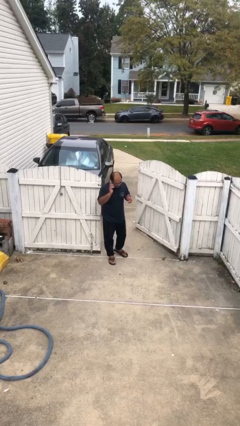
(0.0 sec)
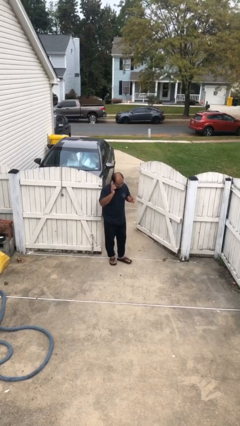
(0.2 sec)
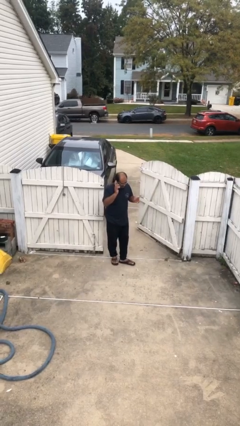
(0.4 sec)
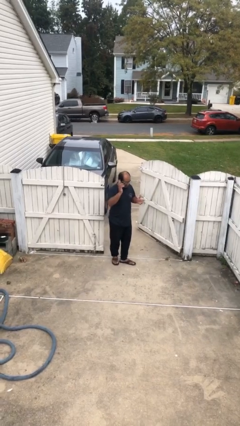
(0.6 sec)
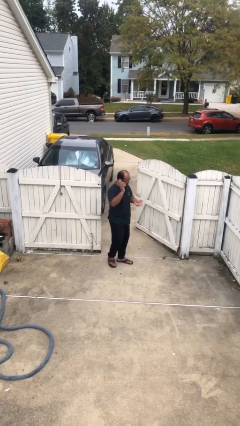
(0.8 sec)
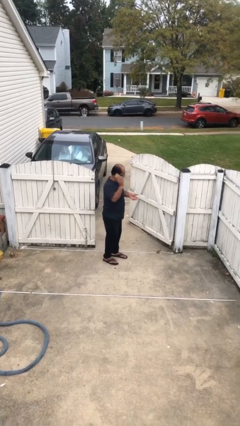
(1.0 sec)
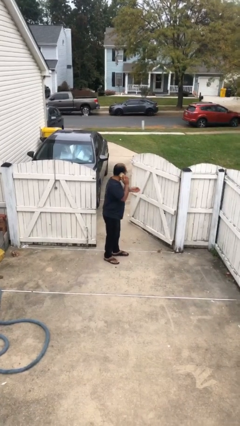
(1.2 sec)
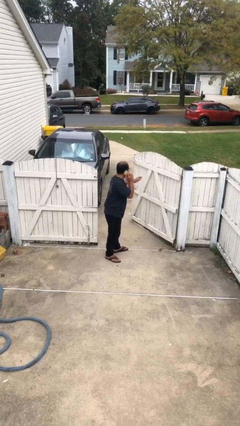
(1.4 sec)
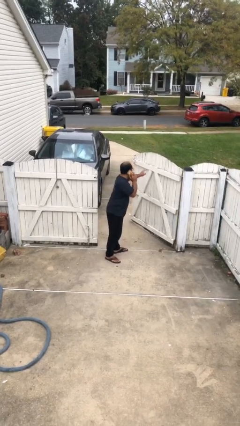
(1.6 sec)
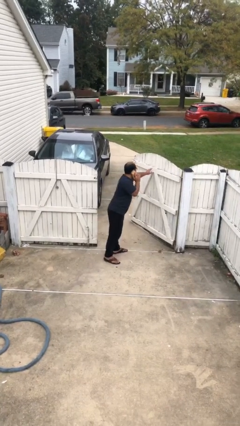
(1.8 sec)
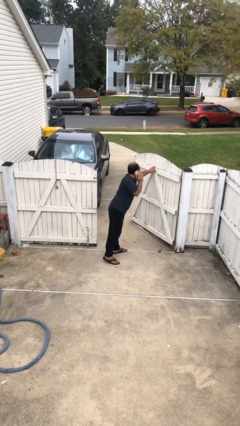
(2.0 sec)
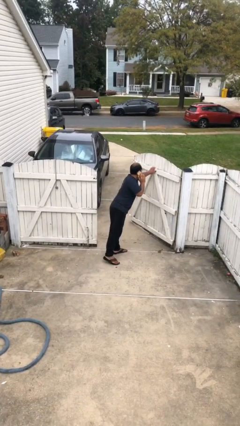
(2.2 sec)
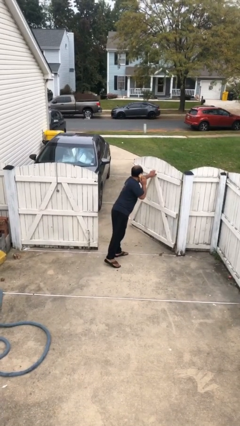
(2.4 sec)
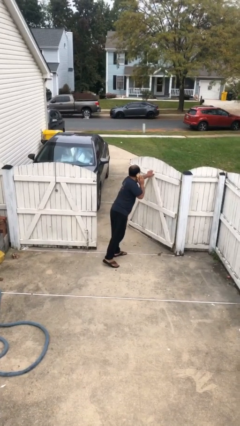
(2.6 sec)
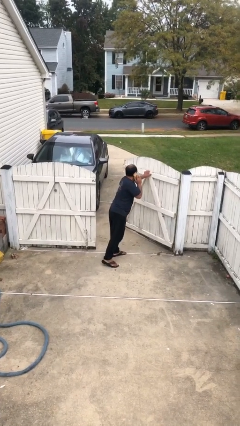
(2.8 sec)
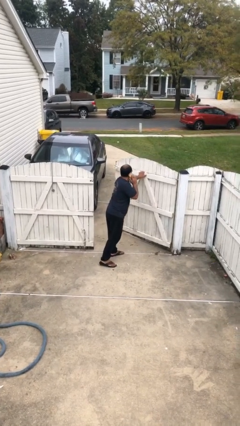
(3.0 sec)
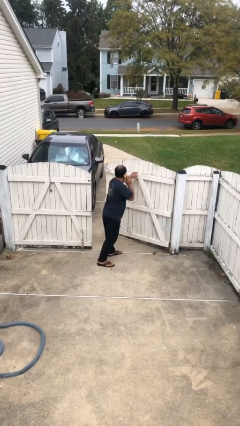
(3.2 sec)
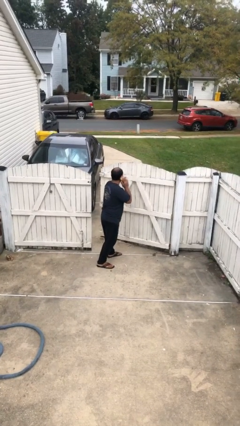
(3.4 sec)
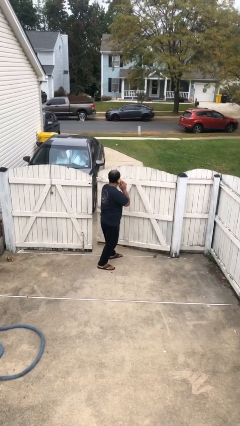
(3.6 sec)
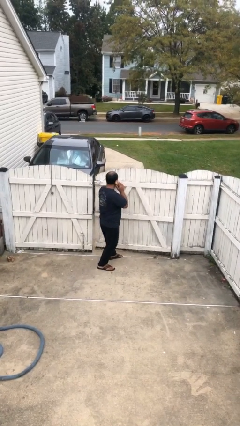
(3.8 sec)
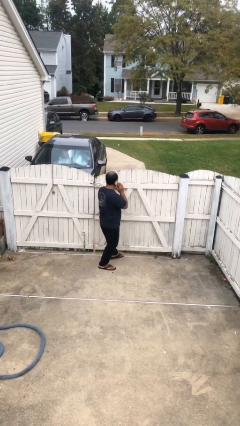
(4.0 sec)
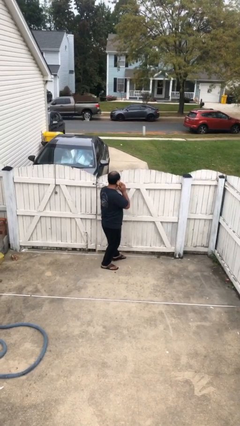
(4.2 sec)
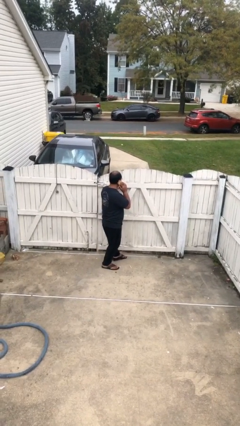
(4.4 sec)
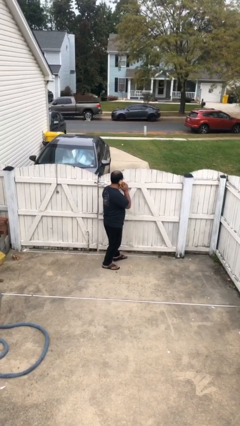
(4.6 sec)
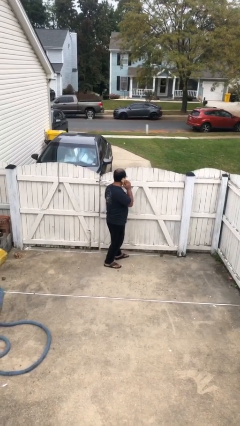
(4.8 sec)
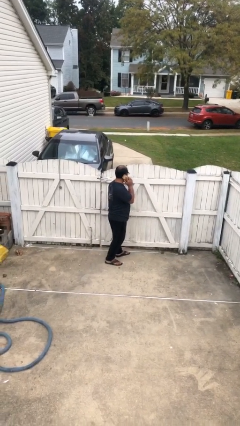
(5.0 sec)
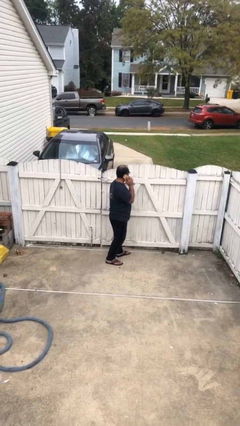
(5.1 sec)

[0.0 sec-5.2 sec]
person closes facility door

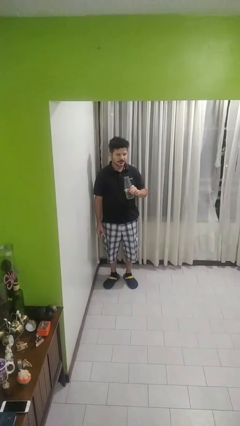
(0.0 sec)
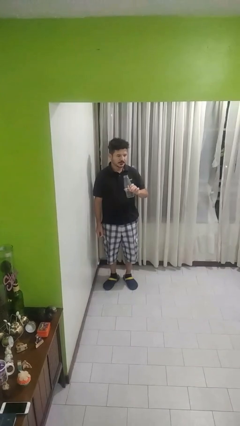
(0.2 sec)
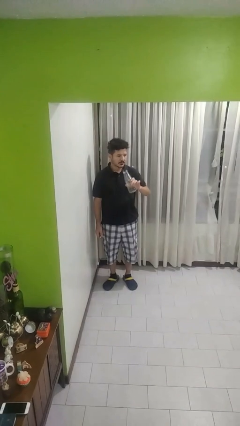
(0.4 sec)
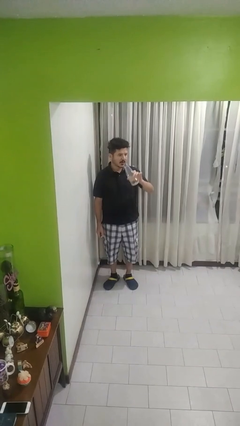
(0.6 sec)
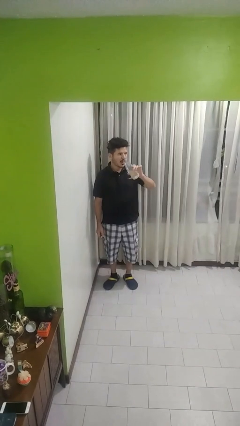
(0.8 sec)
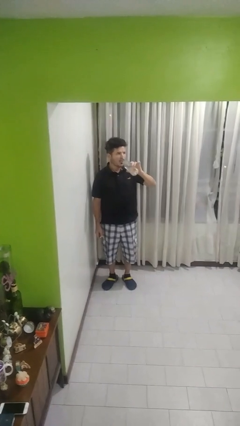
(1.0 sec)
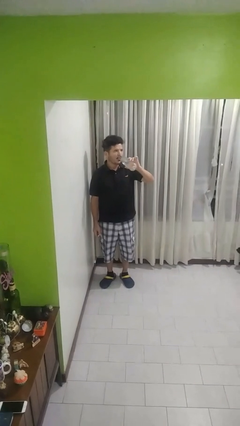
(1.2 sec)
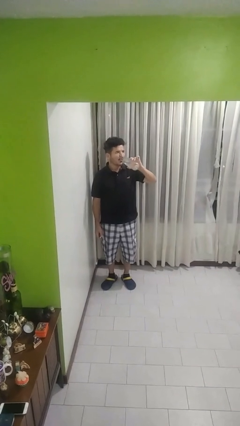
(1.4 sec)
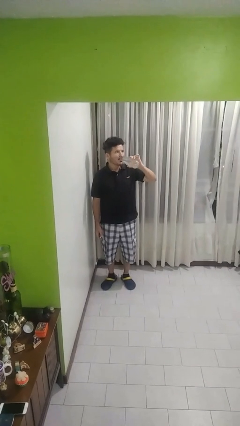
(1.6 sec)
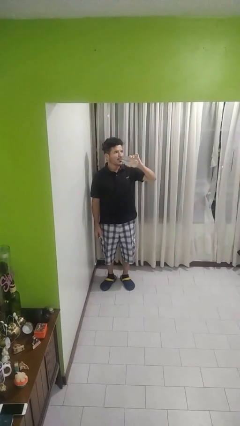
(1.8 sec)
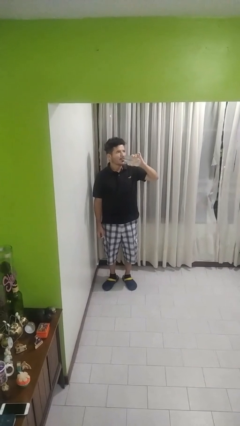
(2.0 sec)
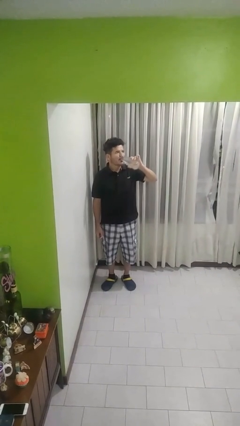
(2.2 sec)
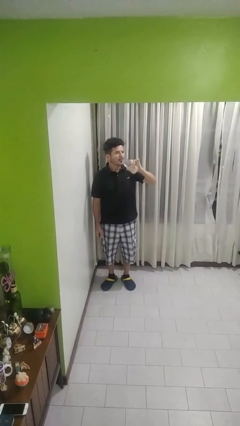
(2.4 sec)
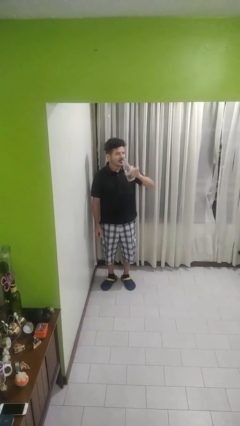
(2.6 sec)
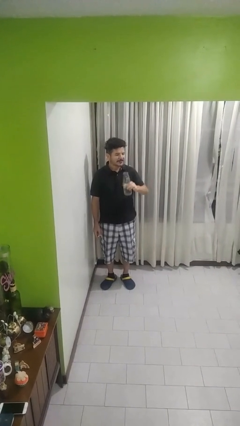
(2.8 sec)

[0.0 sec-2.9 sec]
person drinks from bottle

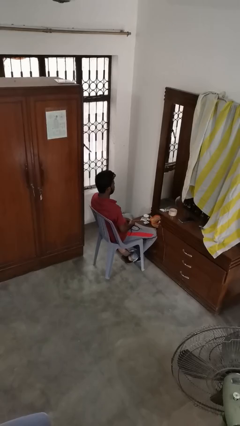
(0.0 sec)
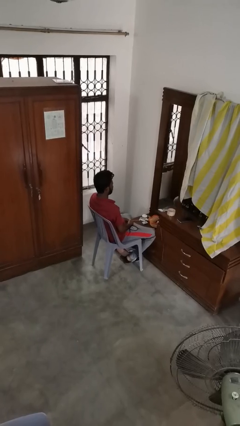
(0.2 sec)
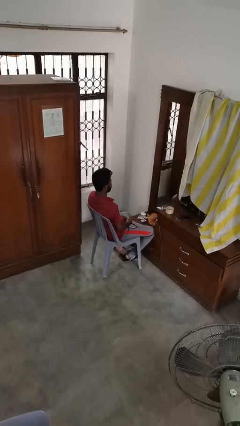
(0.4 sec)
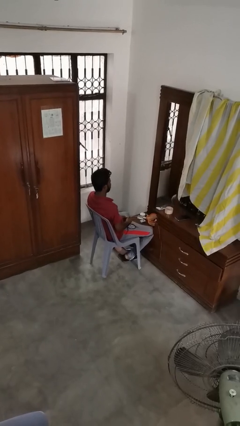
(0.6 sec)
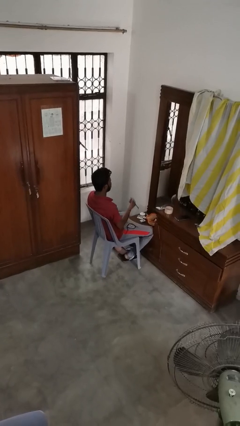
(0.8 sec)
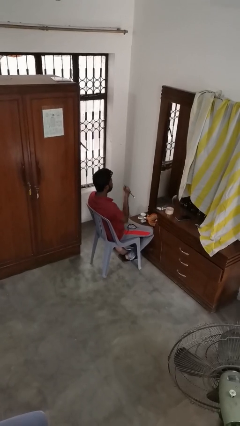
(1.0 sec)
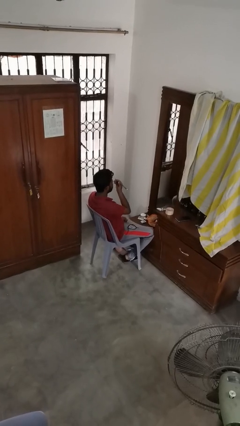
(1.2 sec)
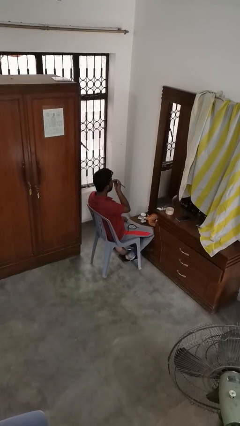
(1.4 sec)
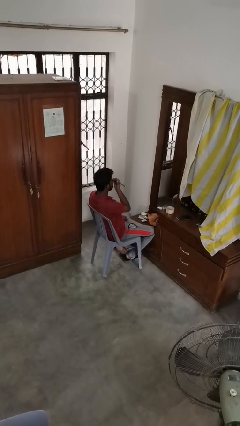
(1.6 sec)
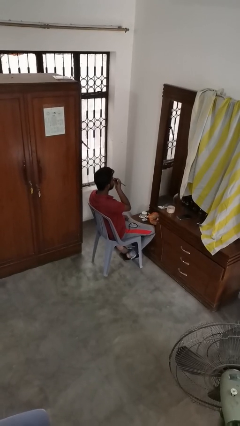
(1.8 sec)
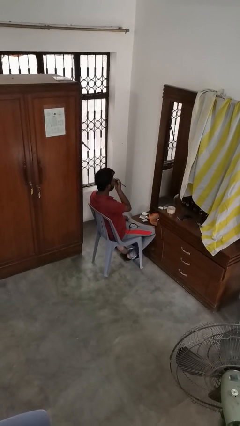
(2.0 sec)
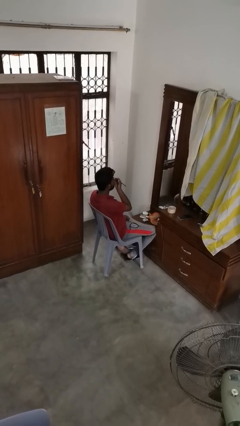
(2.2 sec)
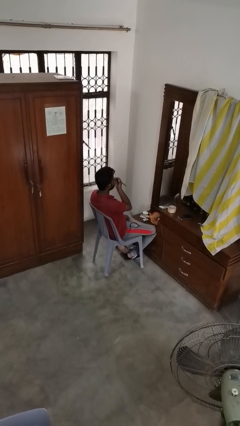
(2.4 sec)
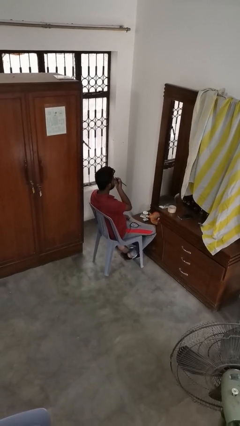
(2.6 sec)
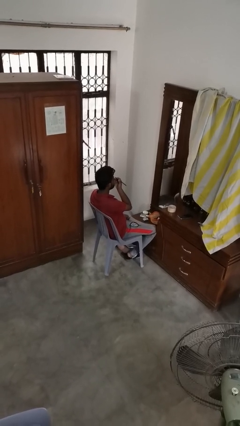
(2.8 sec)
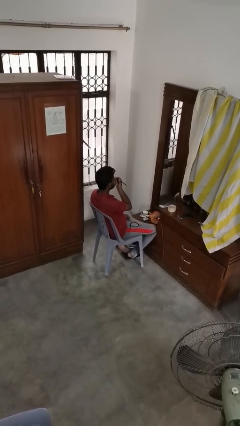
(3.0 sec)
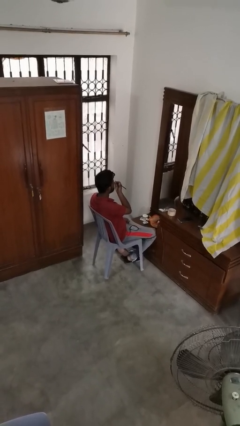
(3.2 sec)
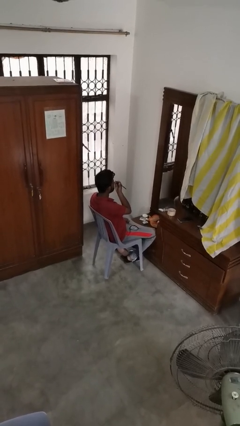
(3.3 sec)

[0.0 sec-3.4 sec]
person applies eye makeup

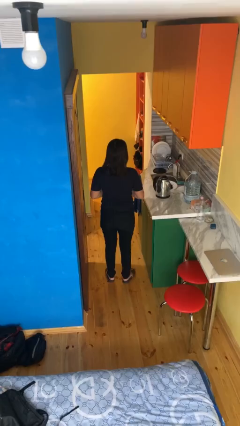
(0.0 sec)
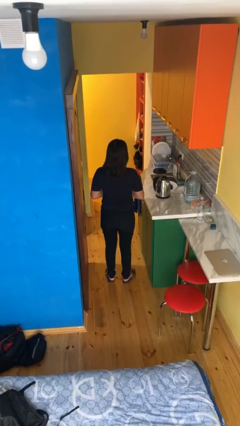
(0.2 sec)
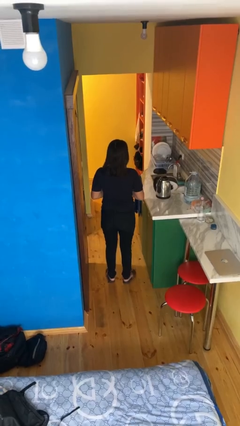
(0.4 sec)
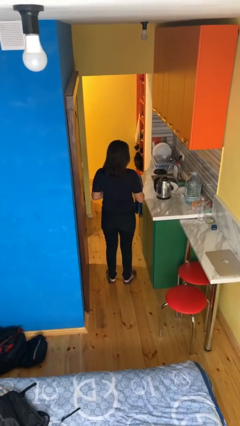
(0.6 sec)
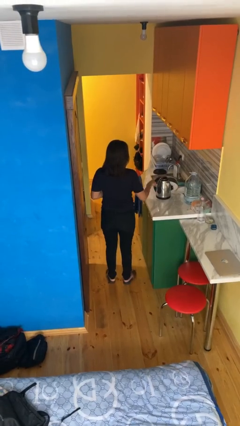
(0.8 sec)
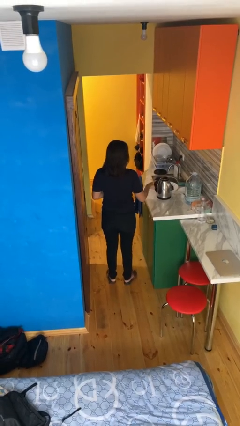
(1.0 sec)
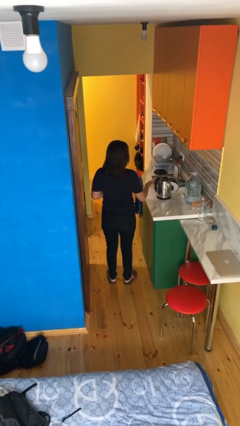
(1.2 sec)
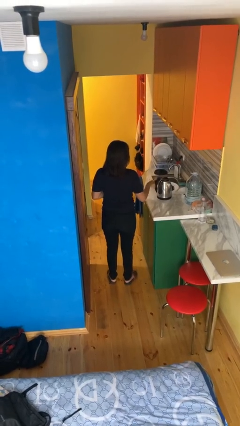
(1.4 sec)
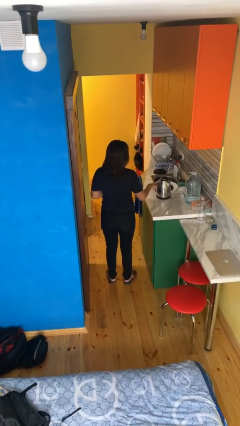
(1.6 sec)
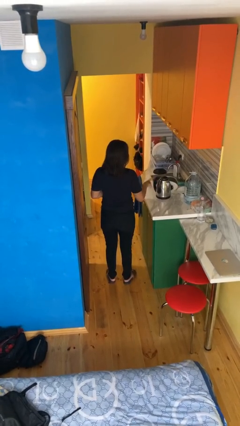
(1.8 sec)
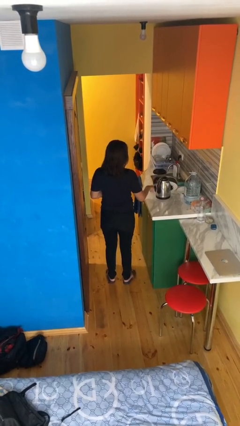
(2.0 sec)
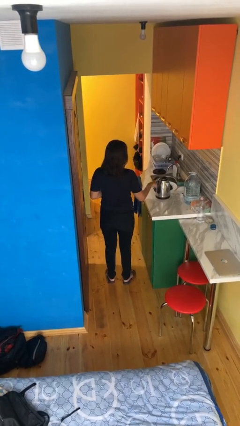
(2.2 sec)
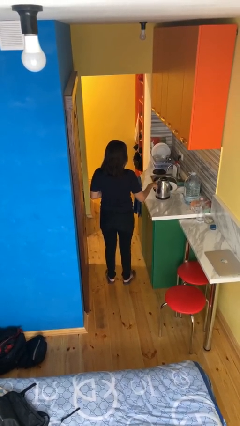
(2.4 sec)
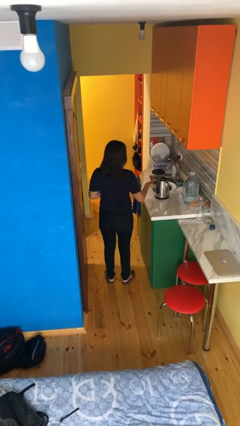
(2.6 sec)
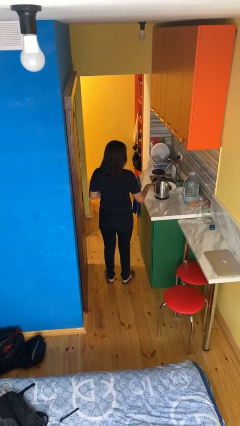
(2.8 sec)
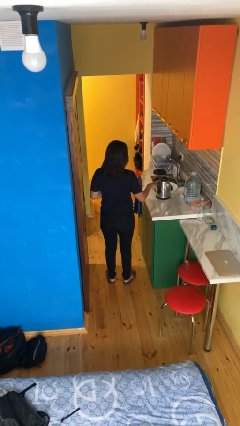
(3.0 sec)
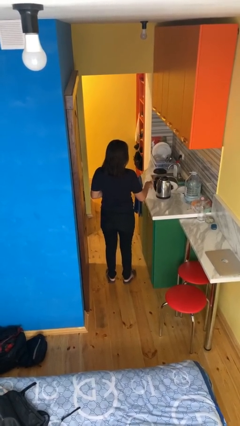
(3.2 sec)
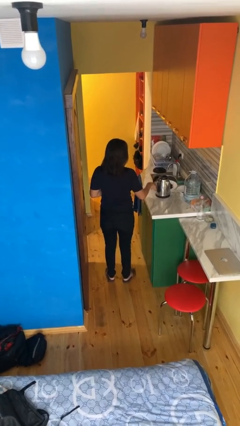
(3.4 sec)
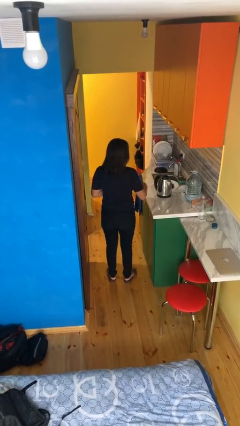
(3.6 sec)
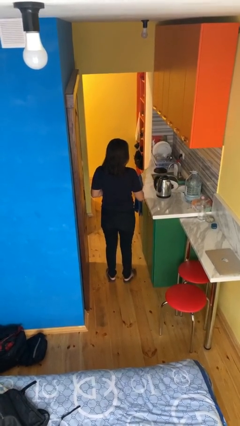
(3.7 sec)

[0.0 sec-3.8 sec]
person taps object with finger

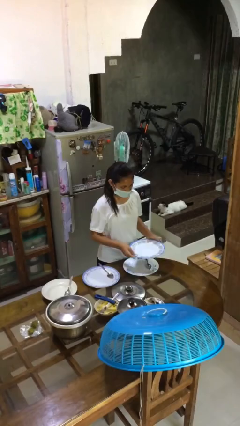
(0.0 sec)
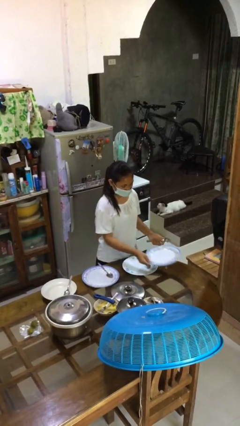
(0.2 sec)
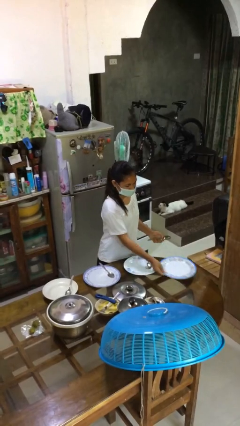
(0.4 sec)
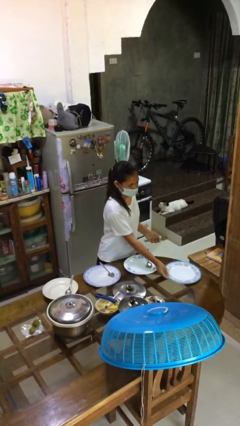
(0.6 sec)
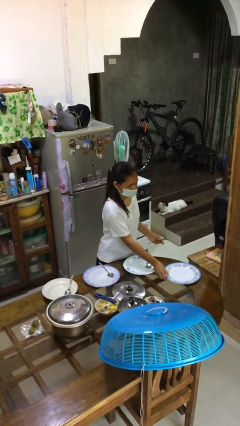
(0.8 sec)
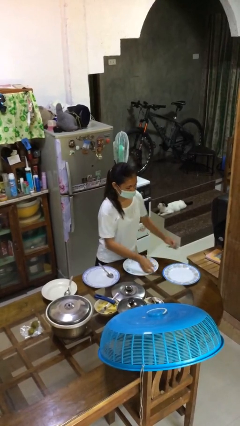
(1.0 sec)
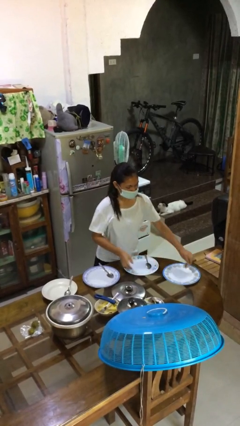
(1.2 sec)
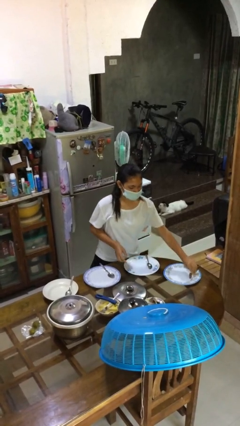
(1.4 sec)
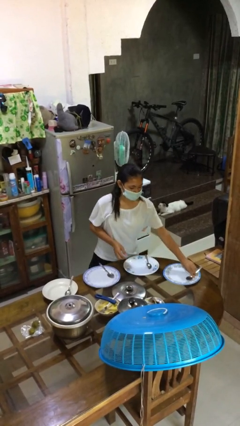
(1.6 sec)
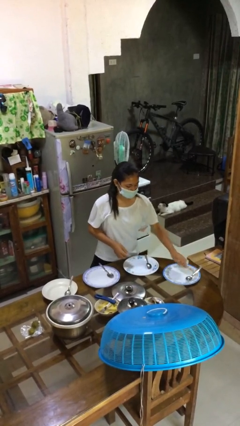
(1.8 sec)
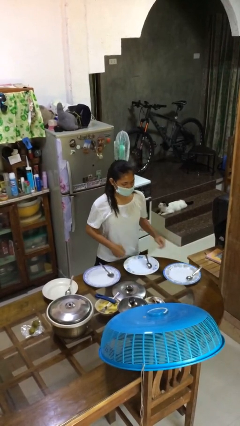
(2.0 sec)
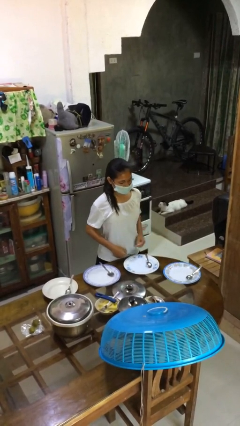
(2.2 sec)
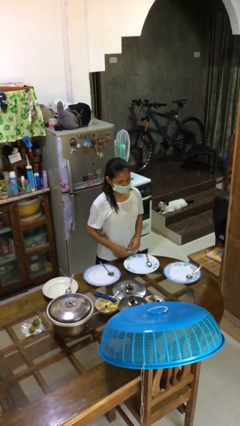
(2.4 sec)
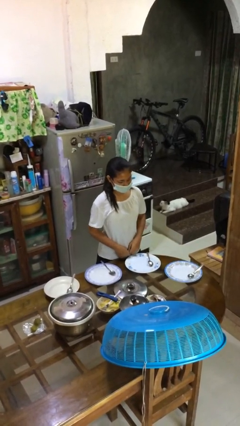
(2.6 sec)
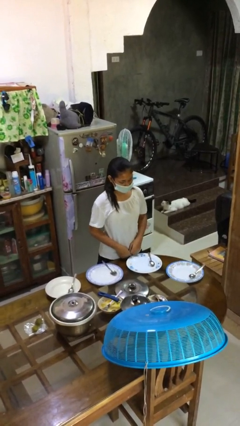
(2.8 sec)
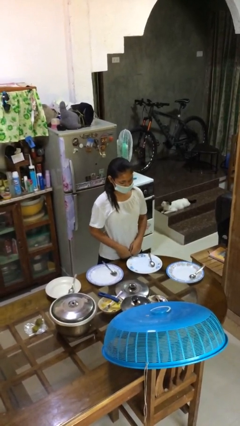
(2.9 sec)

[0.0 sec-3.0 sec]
person sets table
